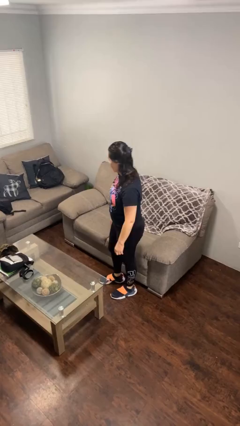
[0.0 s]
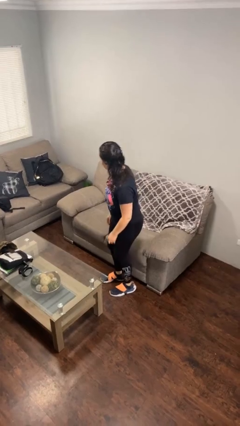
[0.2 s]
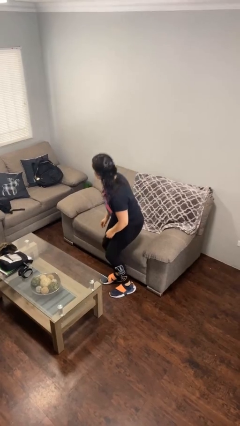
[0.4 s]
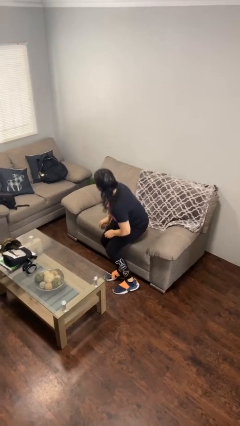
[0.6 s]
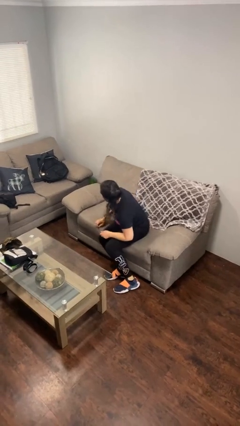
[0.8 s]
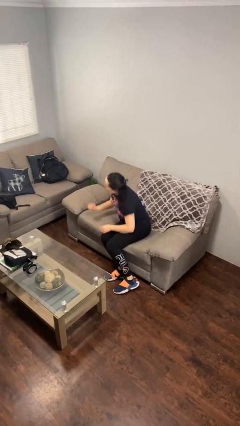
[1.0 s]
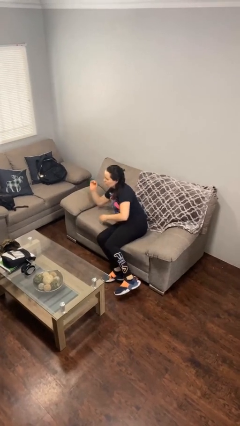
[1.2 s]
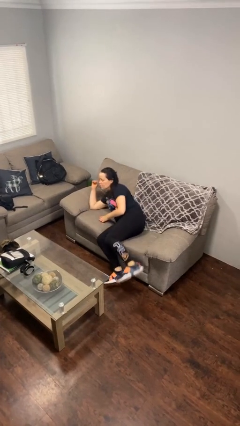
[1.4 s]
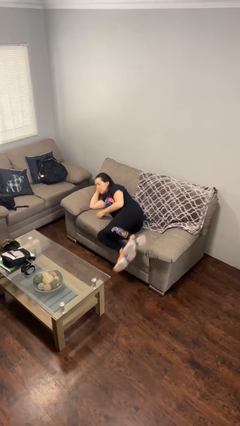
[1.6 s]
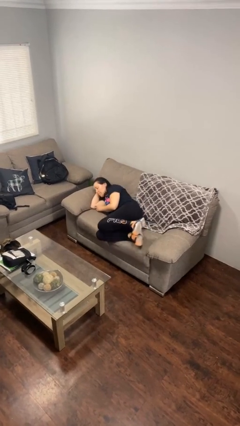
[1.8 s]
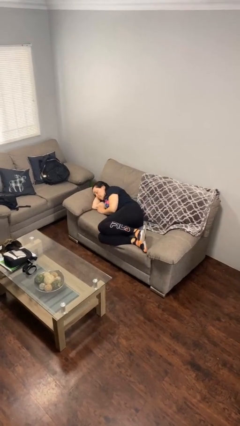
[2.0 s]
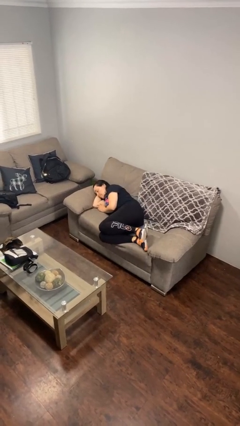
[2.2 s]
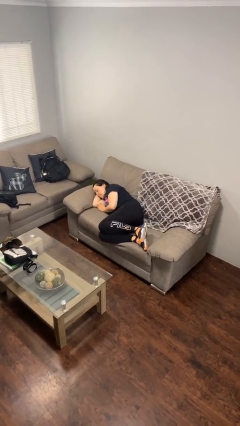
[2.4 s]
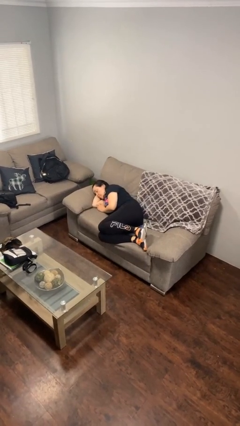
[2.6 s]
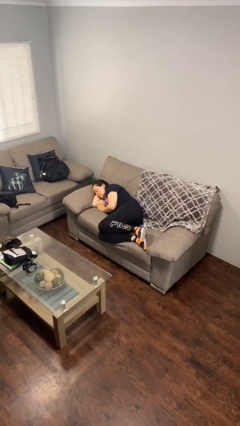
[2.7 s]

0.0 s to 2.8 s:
person lies down on couch

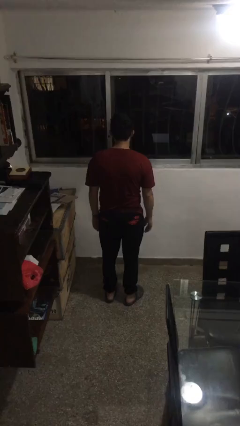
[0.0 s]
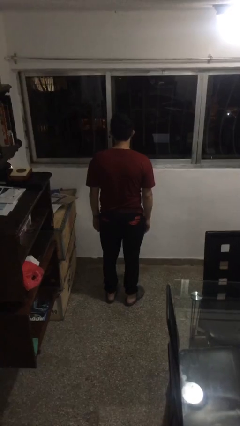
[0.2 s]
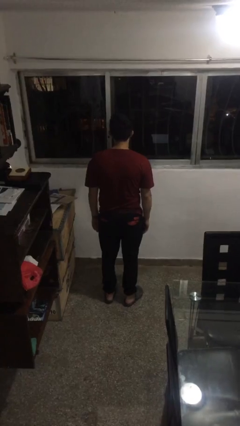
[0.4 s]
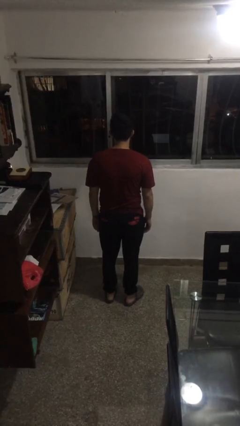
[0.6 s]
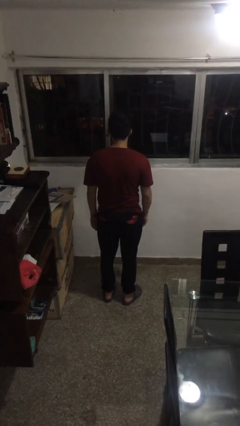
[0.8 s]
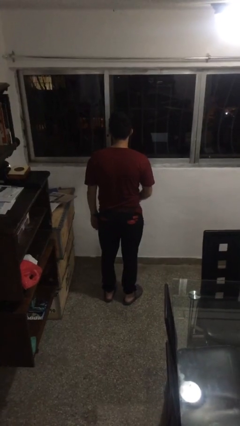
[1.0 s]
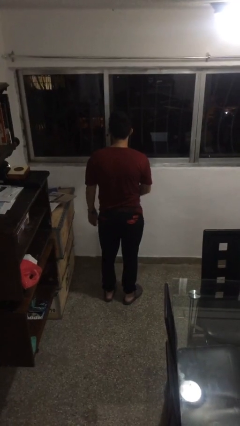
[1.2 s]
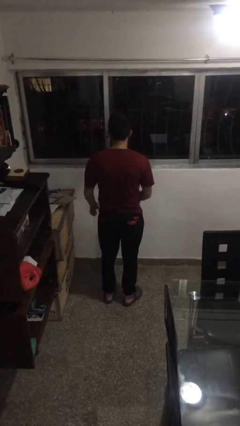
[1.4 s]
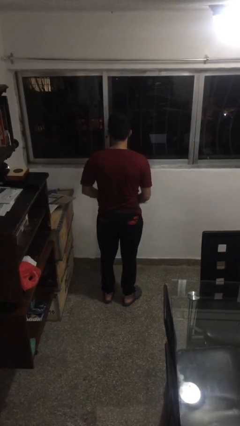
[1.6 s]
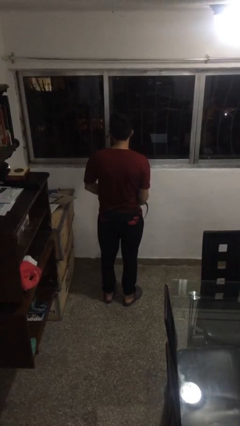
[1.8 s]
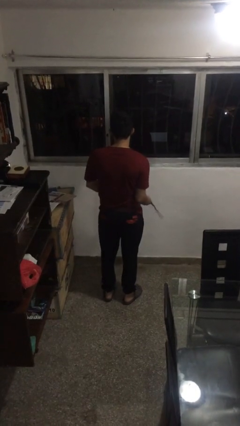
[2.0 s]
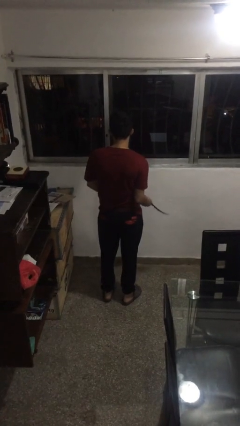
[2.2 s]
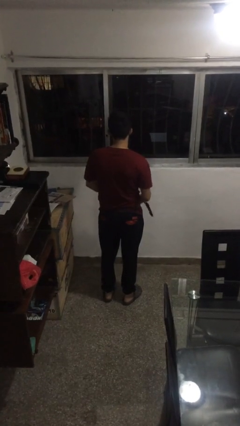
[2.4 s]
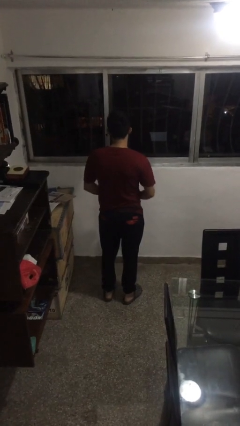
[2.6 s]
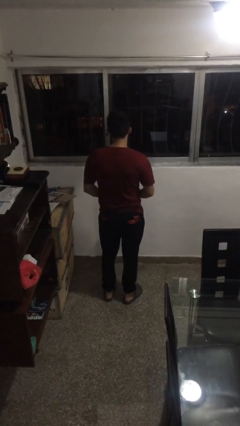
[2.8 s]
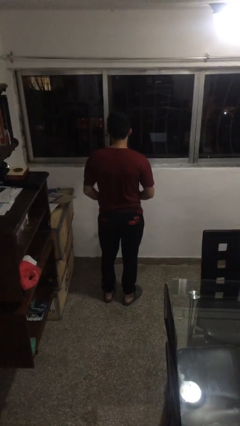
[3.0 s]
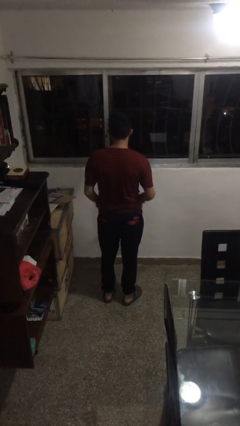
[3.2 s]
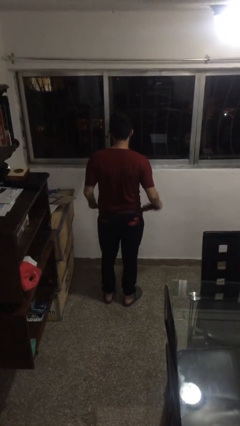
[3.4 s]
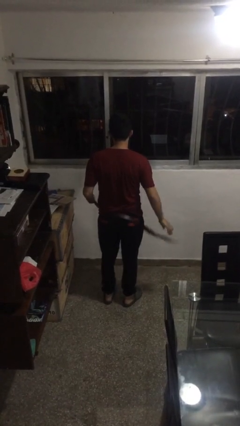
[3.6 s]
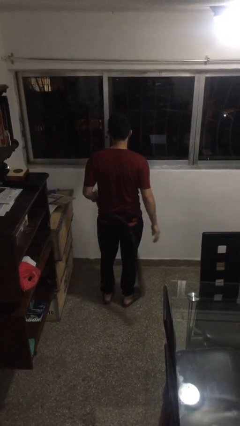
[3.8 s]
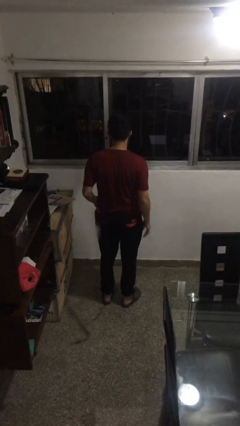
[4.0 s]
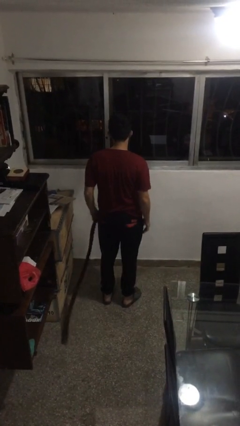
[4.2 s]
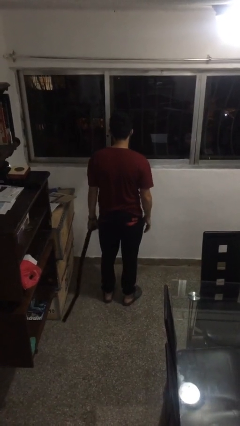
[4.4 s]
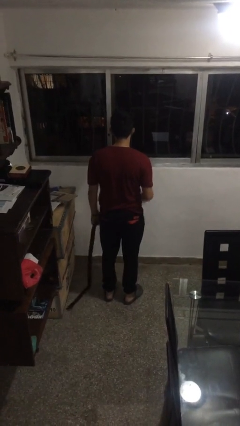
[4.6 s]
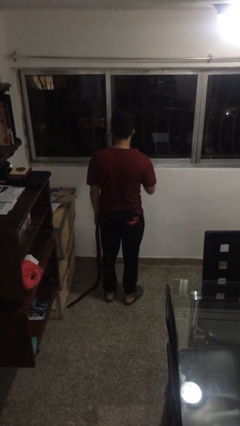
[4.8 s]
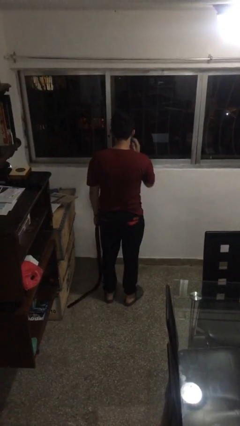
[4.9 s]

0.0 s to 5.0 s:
person takes off belt

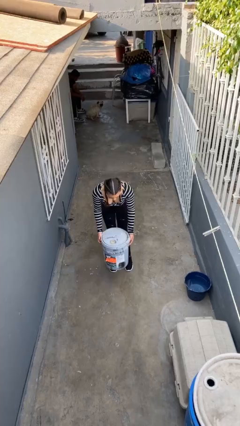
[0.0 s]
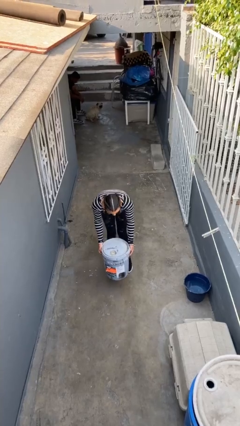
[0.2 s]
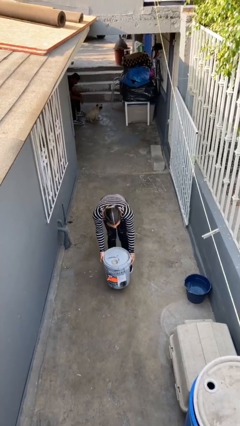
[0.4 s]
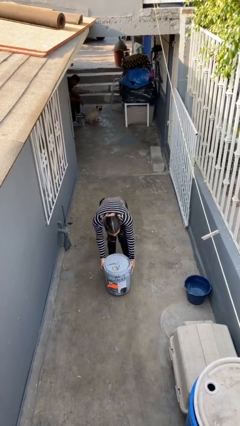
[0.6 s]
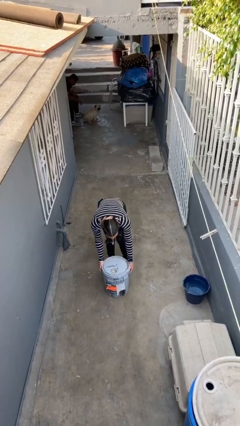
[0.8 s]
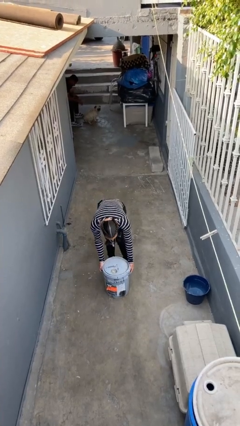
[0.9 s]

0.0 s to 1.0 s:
person puts down object on floor

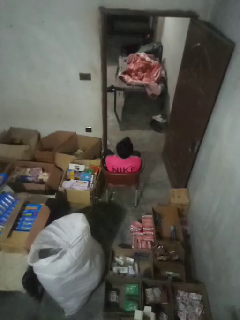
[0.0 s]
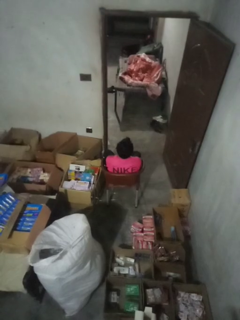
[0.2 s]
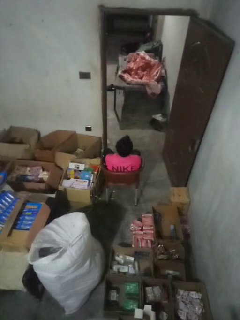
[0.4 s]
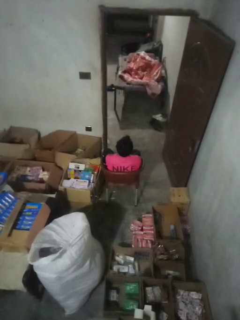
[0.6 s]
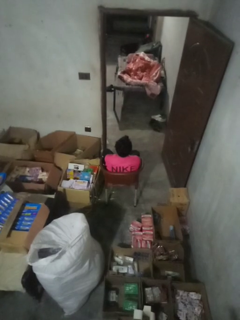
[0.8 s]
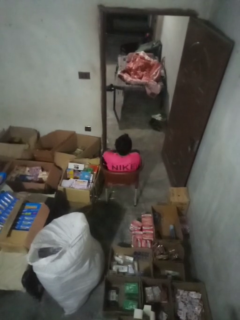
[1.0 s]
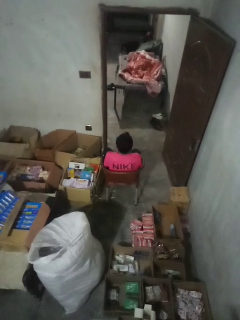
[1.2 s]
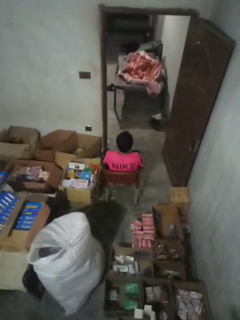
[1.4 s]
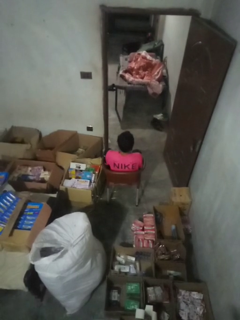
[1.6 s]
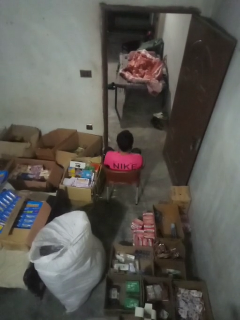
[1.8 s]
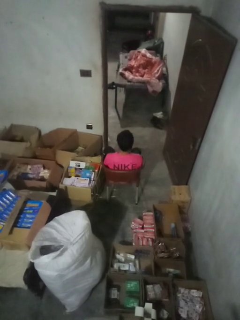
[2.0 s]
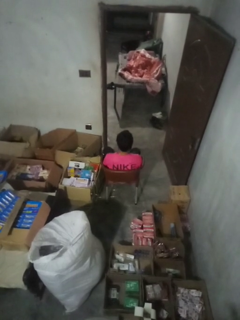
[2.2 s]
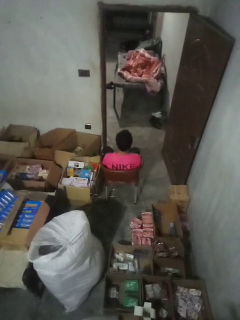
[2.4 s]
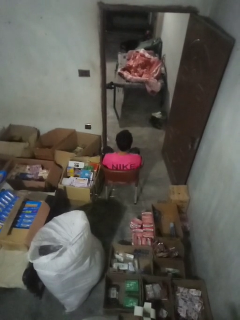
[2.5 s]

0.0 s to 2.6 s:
person shrugs

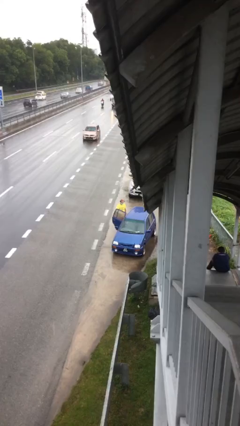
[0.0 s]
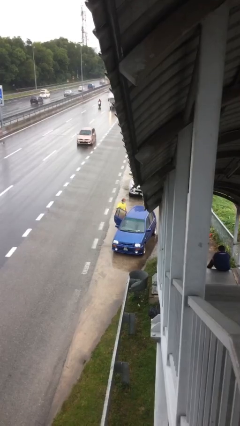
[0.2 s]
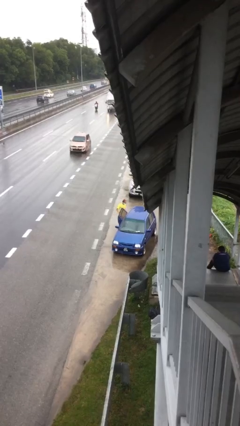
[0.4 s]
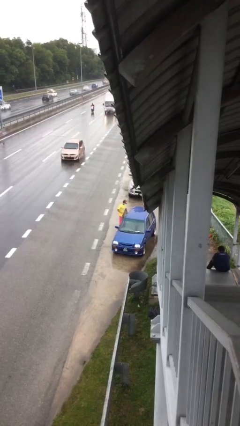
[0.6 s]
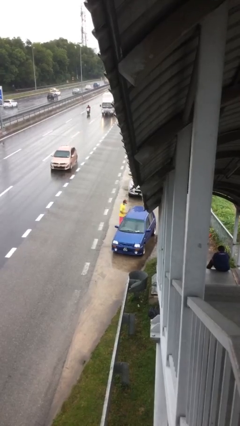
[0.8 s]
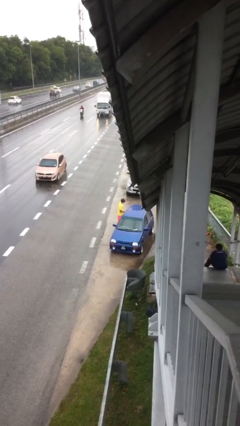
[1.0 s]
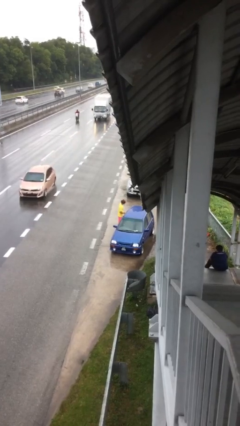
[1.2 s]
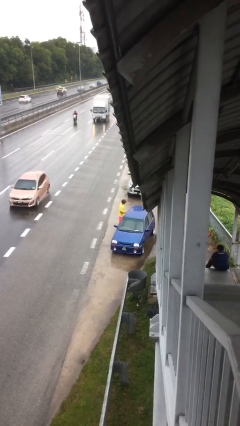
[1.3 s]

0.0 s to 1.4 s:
person closes car door

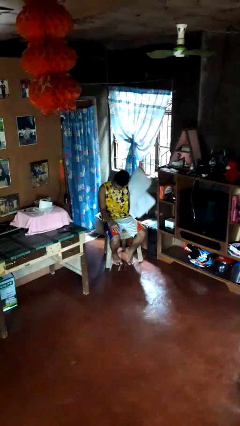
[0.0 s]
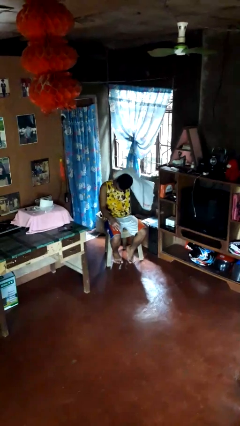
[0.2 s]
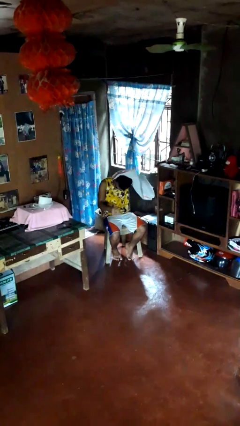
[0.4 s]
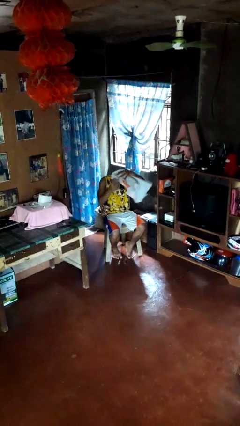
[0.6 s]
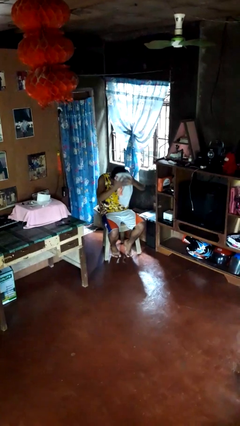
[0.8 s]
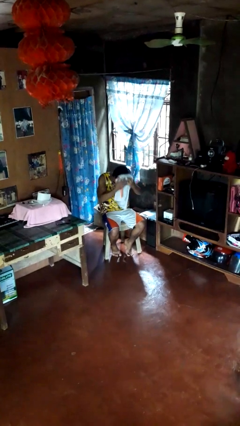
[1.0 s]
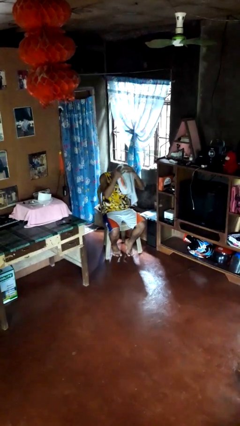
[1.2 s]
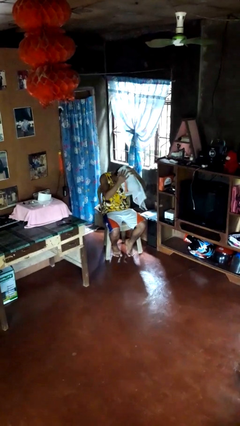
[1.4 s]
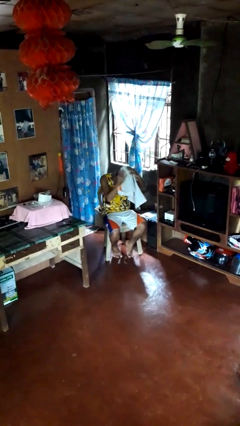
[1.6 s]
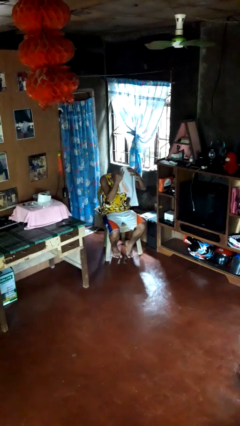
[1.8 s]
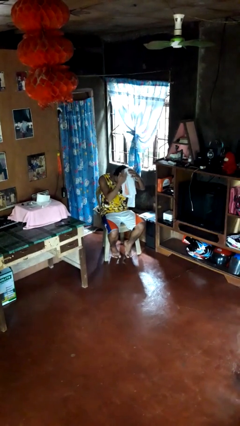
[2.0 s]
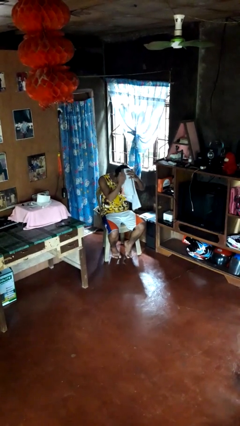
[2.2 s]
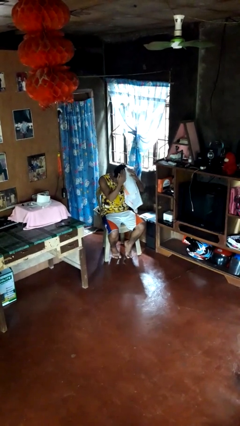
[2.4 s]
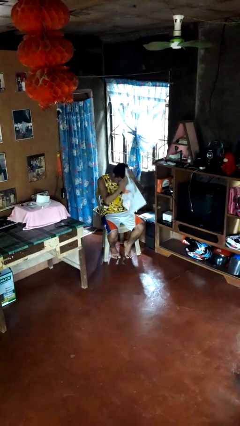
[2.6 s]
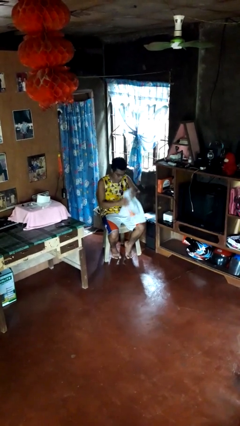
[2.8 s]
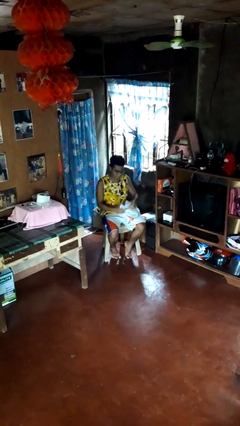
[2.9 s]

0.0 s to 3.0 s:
person dries hair with towel

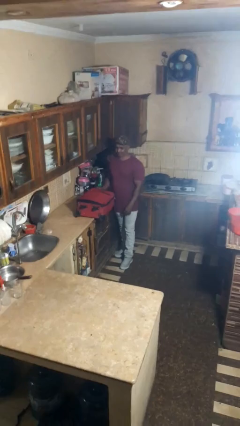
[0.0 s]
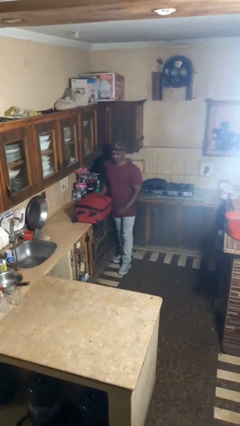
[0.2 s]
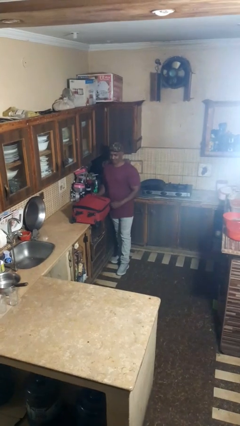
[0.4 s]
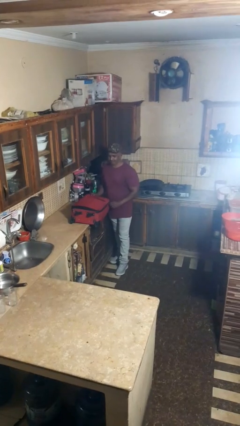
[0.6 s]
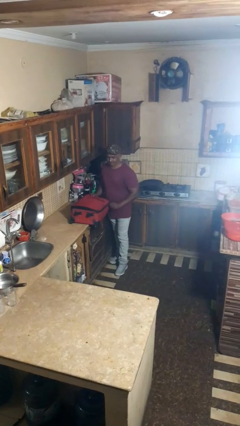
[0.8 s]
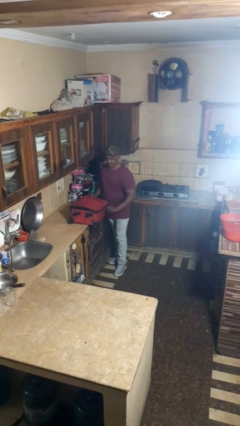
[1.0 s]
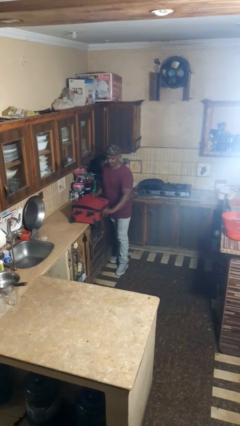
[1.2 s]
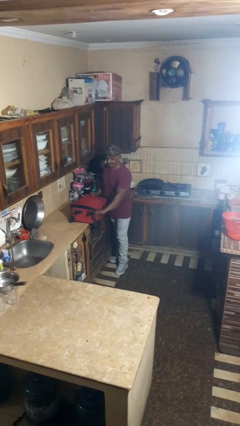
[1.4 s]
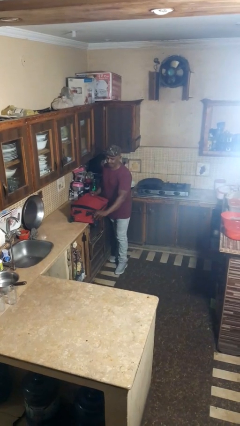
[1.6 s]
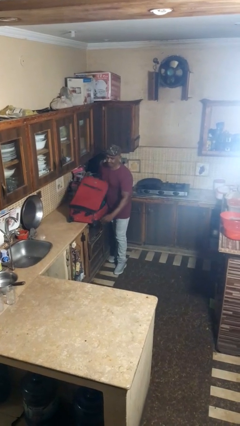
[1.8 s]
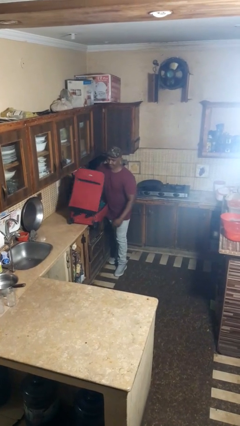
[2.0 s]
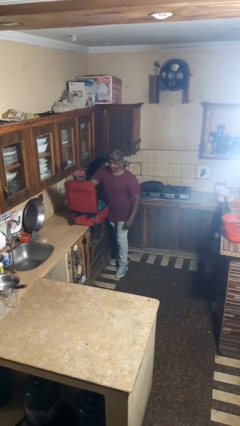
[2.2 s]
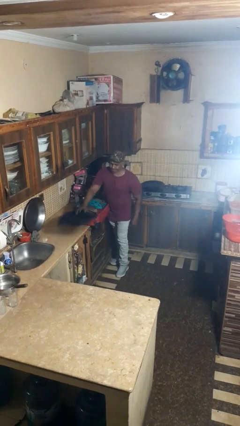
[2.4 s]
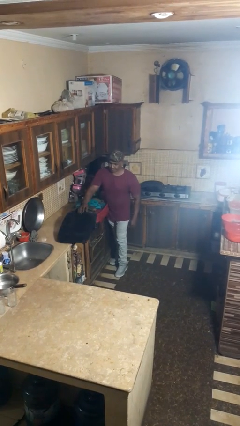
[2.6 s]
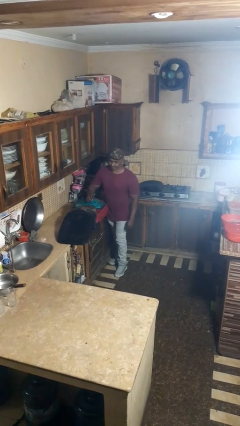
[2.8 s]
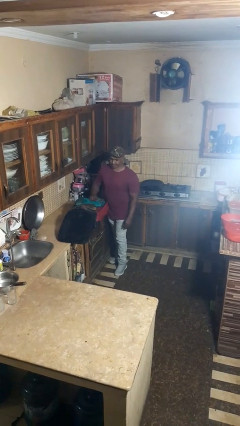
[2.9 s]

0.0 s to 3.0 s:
person opens suitcase
